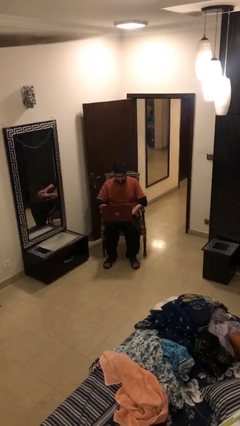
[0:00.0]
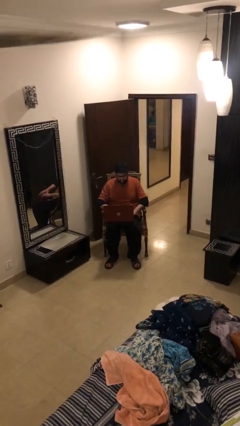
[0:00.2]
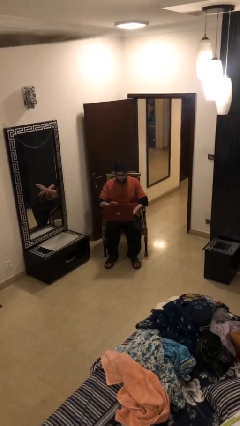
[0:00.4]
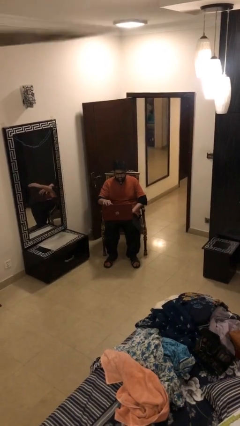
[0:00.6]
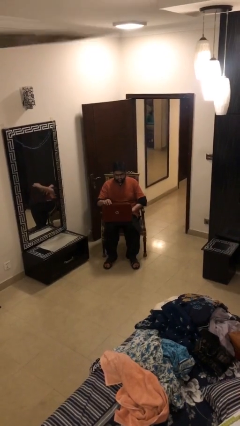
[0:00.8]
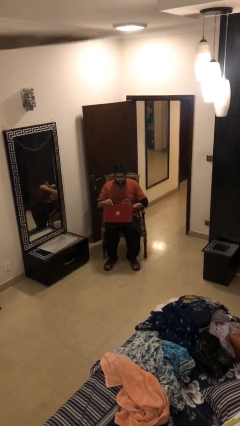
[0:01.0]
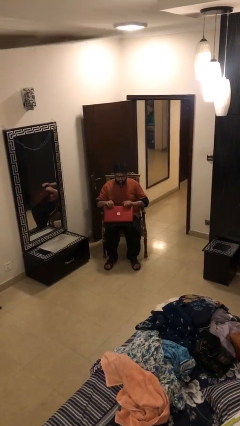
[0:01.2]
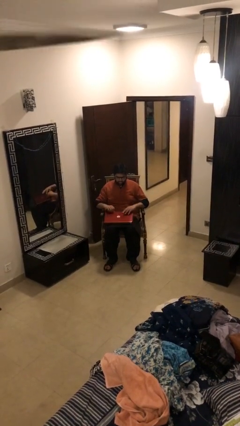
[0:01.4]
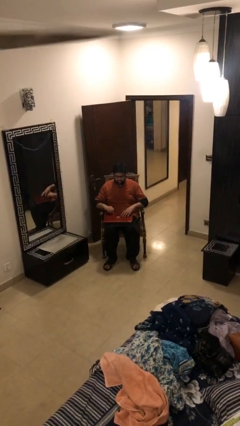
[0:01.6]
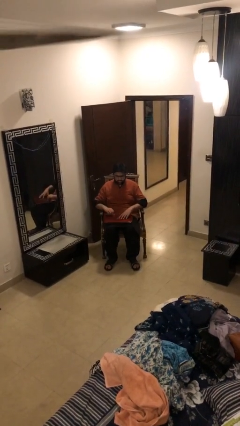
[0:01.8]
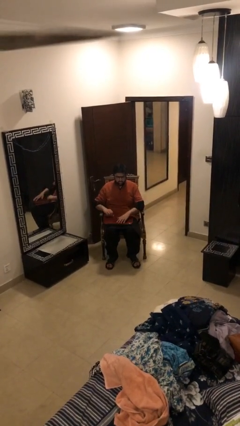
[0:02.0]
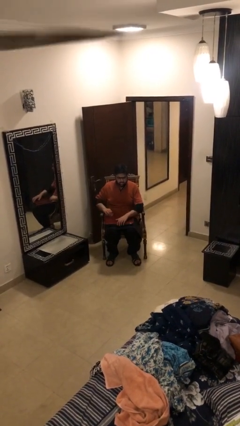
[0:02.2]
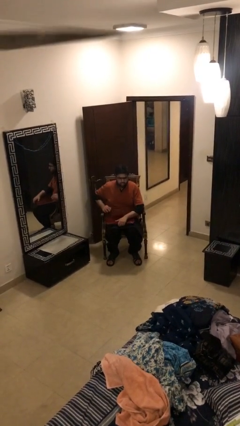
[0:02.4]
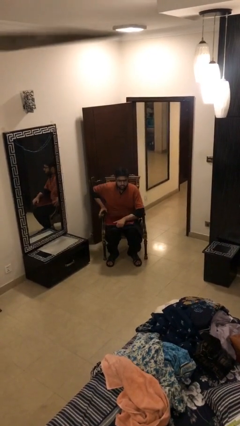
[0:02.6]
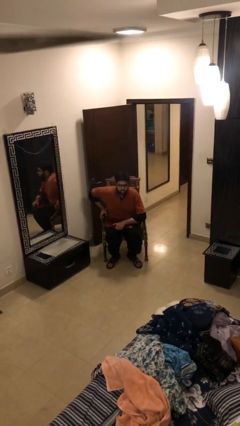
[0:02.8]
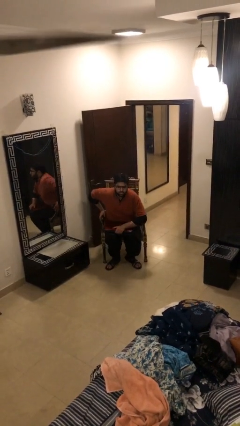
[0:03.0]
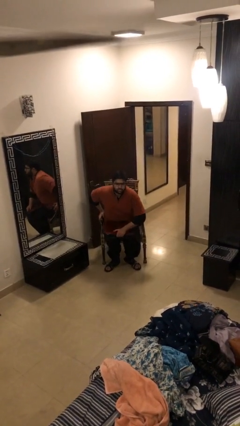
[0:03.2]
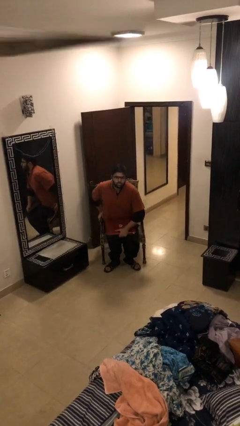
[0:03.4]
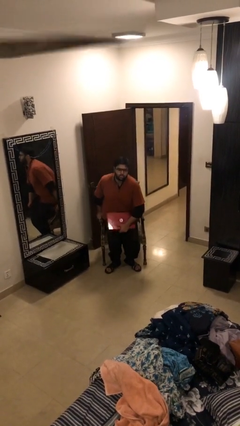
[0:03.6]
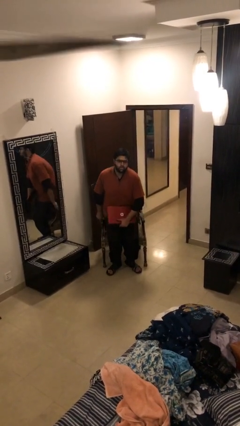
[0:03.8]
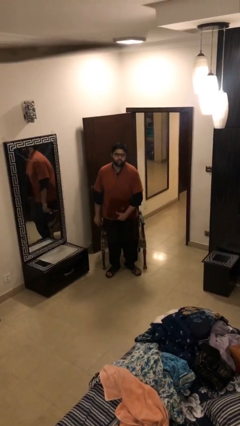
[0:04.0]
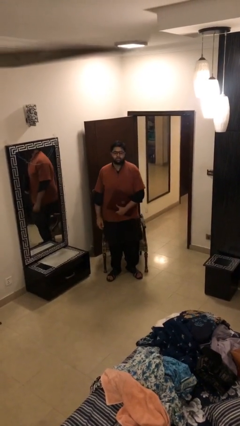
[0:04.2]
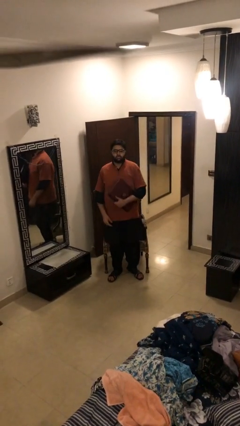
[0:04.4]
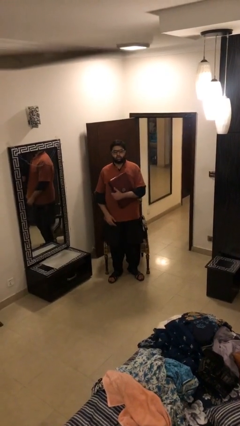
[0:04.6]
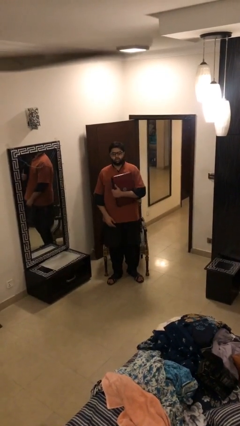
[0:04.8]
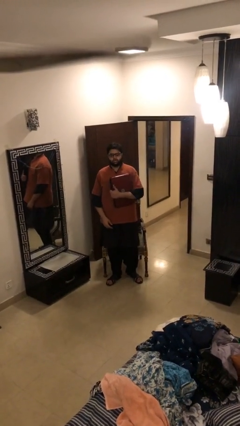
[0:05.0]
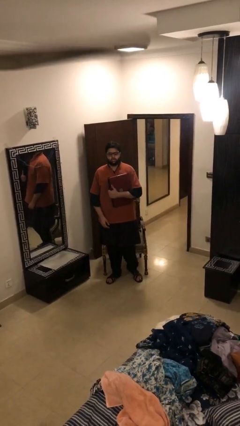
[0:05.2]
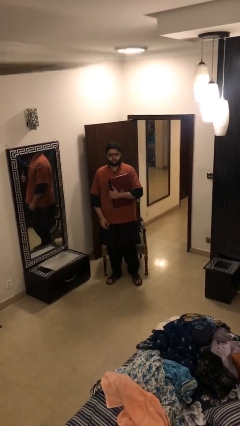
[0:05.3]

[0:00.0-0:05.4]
person stands up

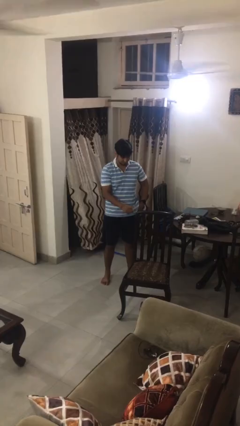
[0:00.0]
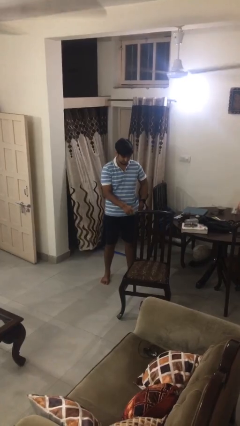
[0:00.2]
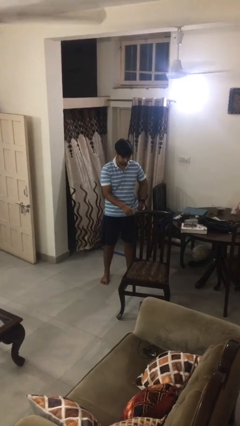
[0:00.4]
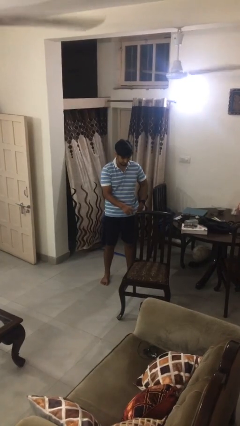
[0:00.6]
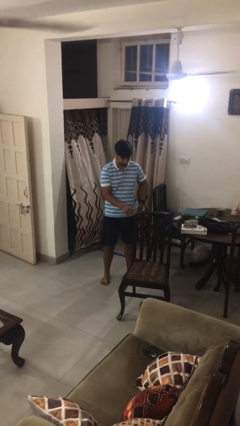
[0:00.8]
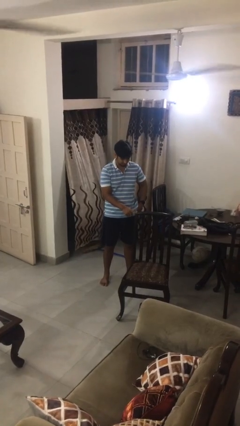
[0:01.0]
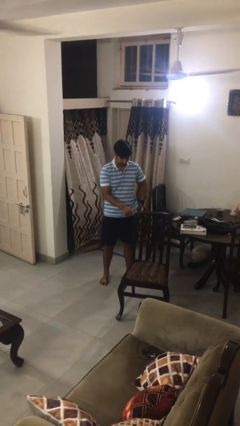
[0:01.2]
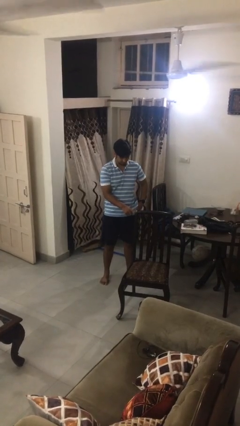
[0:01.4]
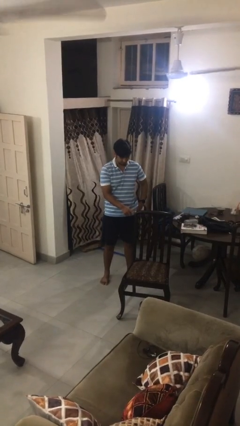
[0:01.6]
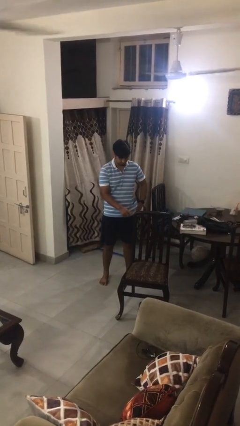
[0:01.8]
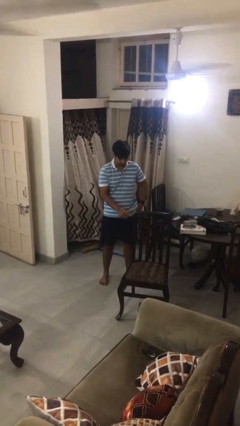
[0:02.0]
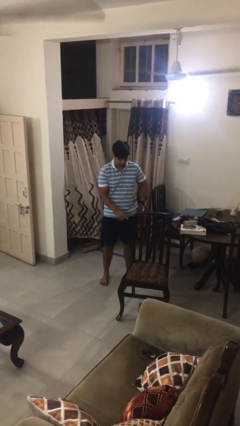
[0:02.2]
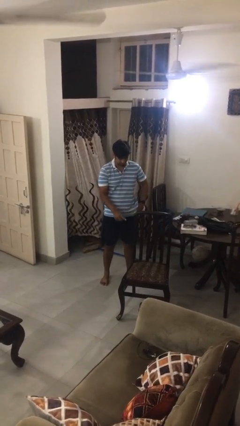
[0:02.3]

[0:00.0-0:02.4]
person taps object with finger

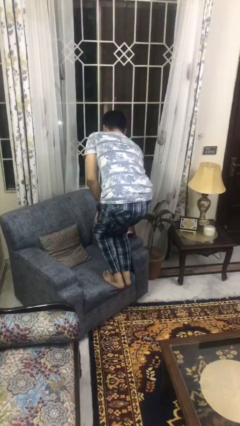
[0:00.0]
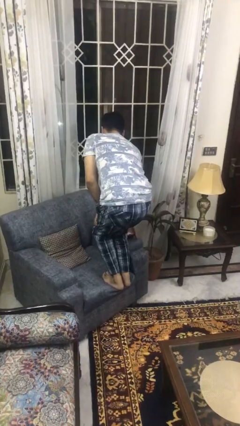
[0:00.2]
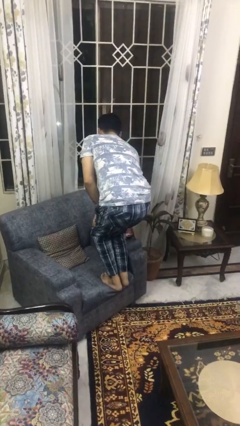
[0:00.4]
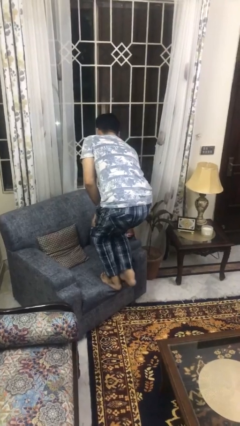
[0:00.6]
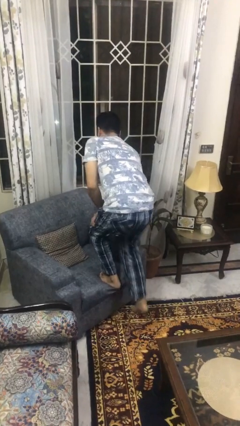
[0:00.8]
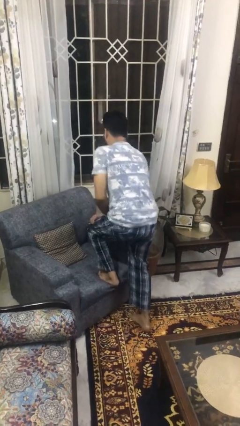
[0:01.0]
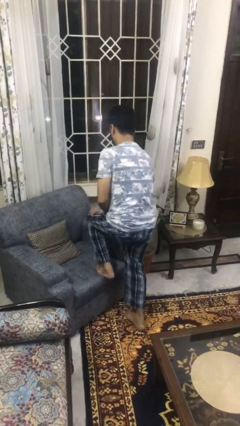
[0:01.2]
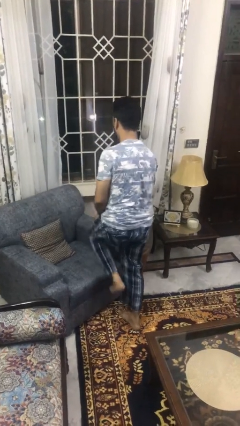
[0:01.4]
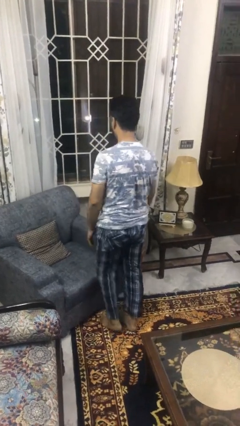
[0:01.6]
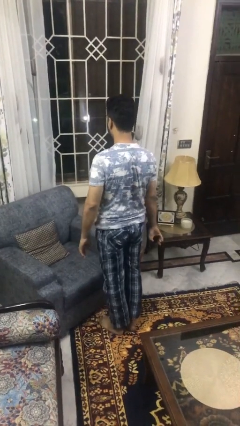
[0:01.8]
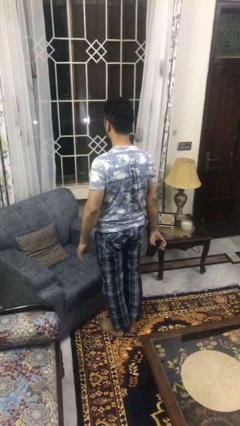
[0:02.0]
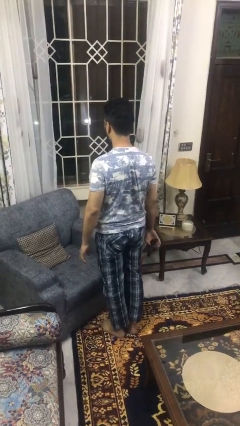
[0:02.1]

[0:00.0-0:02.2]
person climbs off couch

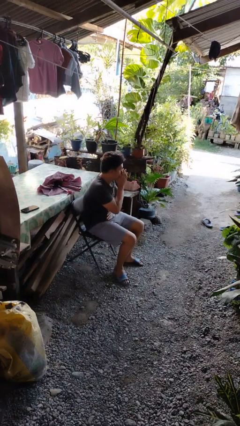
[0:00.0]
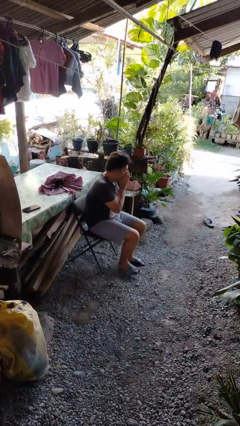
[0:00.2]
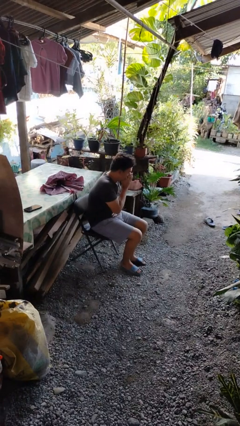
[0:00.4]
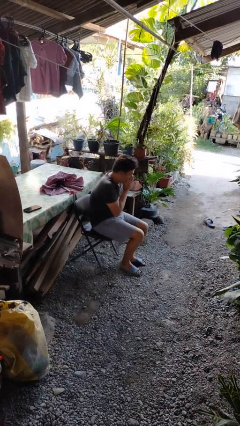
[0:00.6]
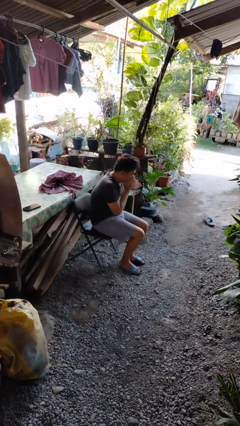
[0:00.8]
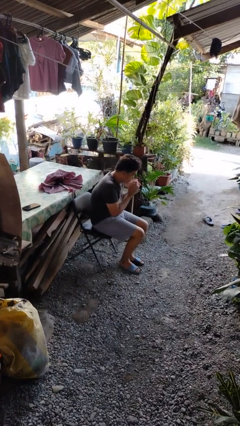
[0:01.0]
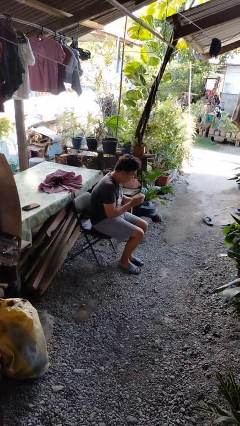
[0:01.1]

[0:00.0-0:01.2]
person blows into hands

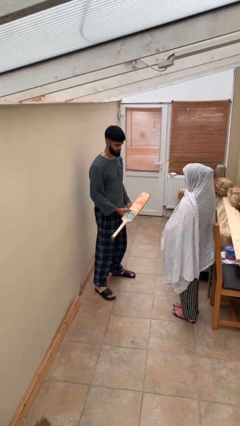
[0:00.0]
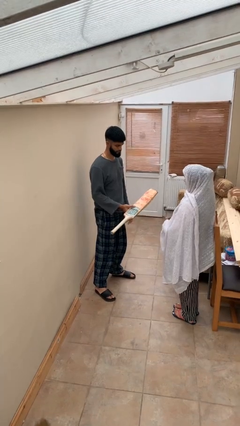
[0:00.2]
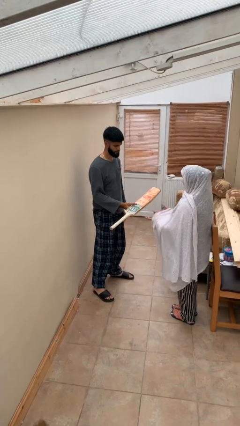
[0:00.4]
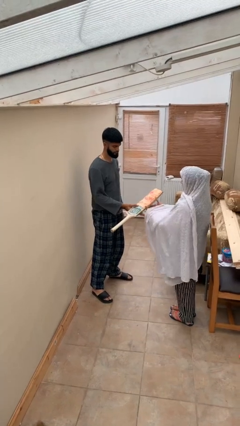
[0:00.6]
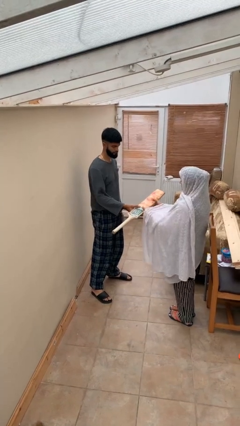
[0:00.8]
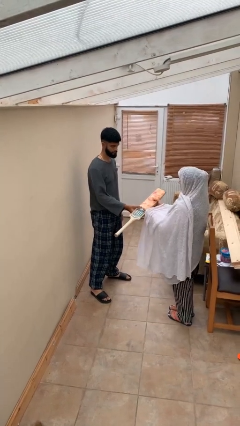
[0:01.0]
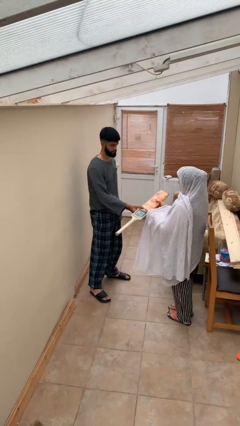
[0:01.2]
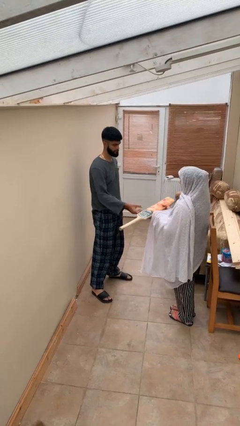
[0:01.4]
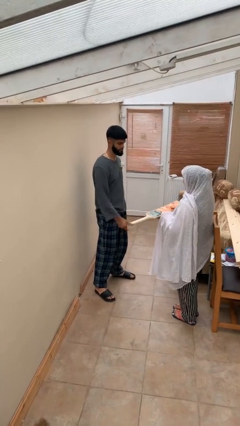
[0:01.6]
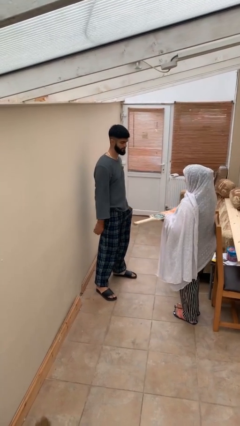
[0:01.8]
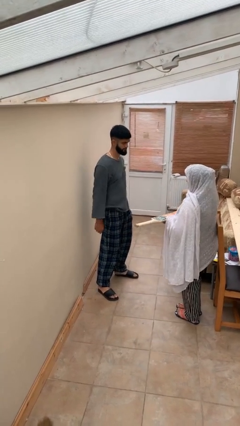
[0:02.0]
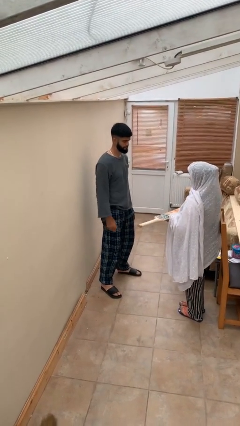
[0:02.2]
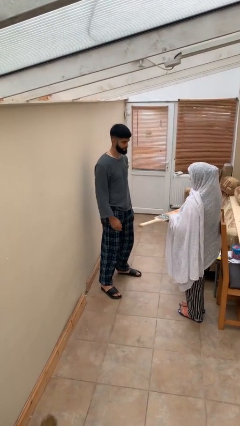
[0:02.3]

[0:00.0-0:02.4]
person transfers object to person

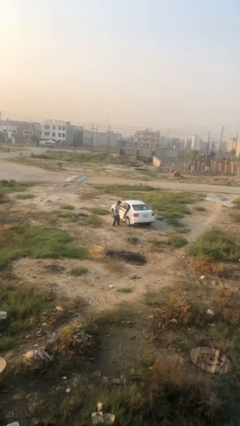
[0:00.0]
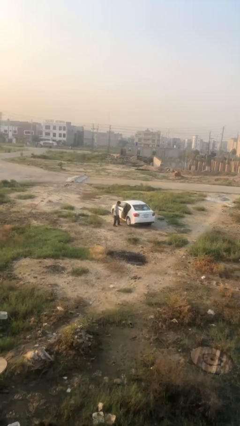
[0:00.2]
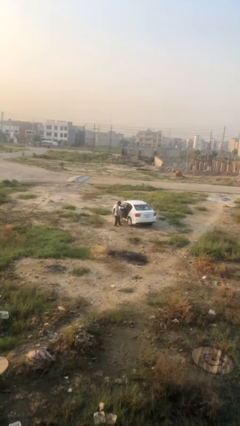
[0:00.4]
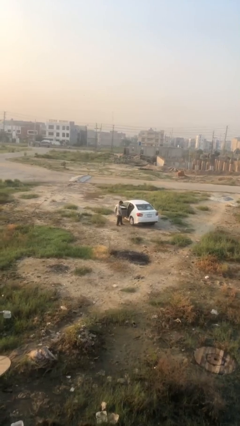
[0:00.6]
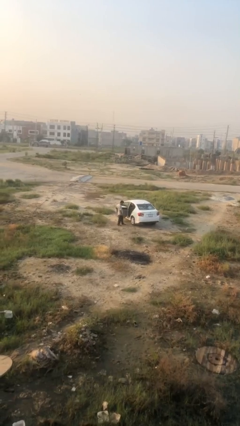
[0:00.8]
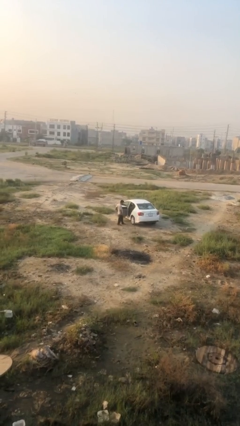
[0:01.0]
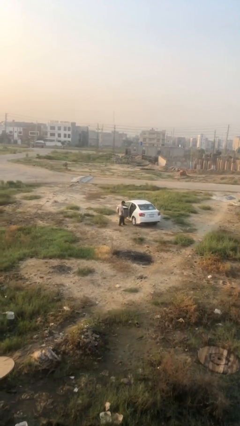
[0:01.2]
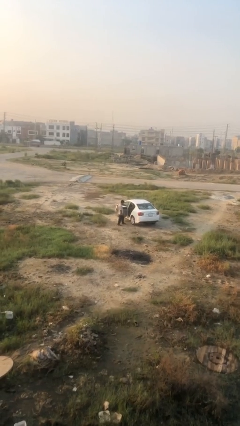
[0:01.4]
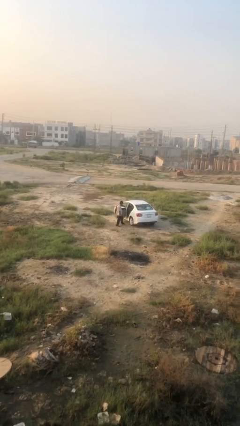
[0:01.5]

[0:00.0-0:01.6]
person opens car door

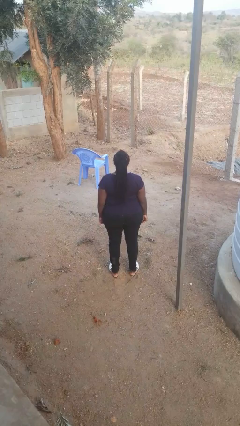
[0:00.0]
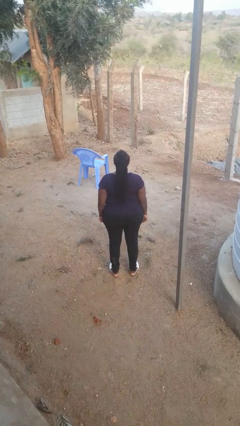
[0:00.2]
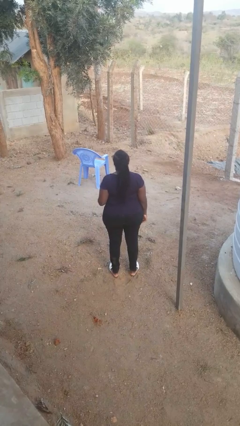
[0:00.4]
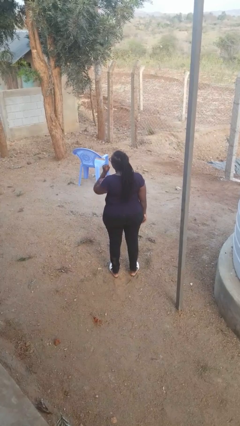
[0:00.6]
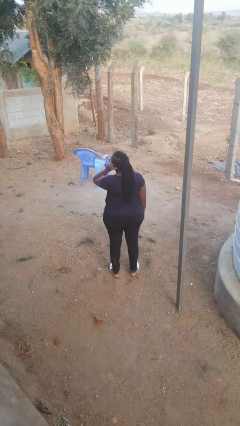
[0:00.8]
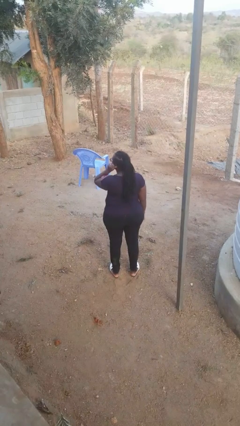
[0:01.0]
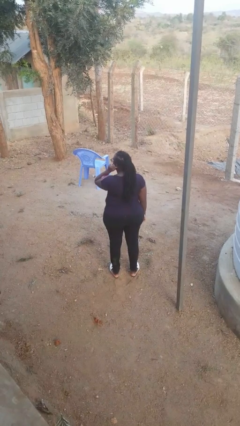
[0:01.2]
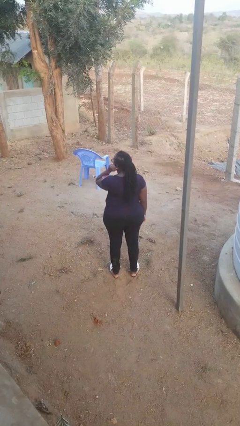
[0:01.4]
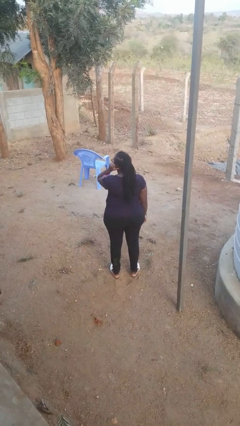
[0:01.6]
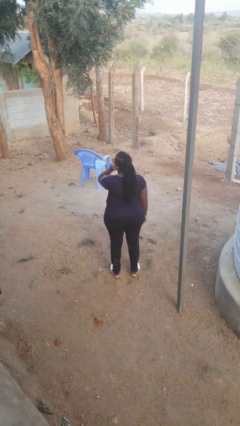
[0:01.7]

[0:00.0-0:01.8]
person touches earlobe
